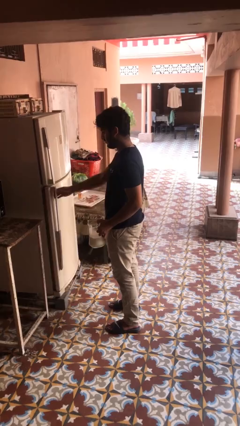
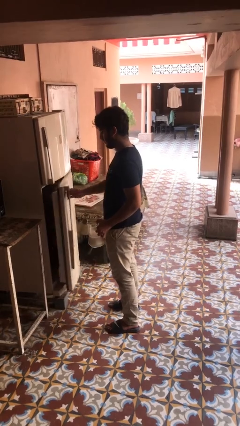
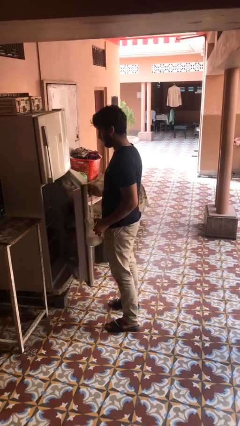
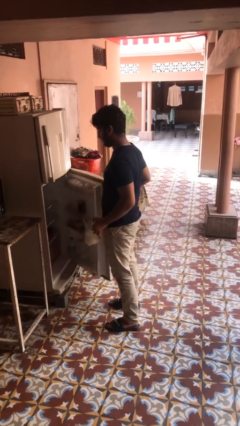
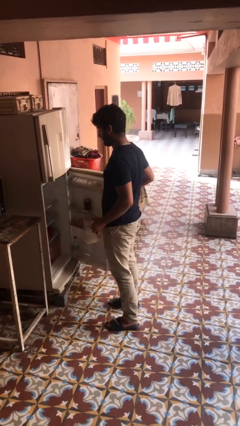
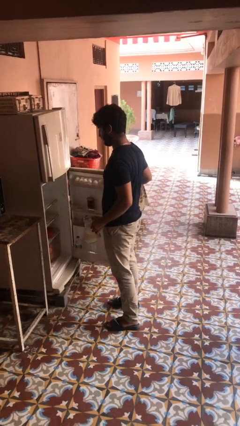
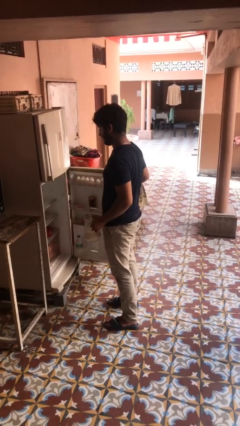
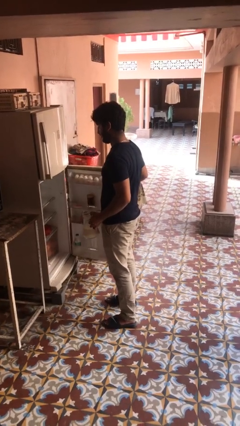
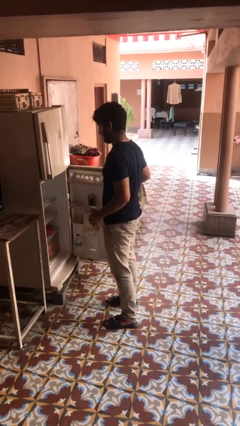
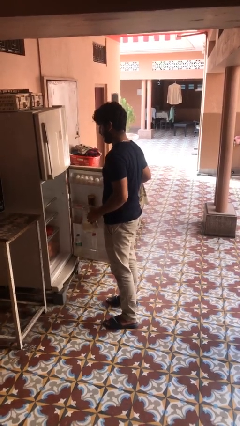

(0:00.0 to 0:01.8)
person opens refrigerator

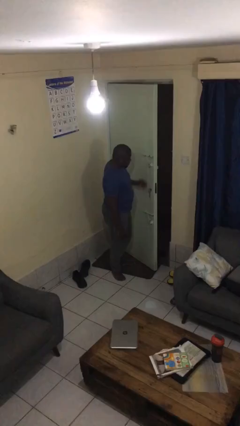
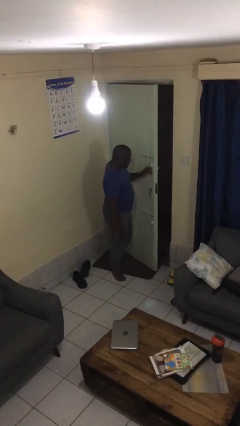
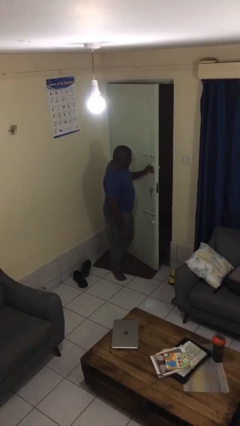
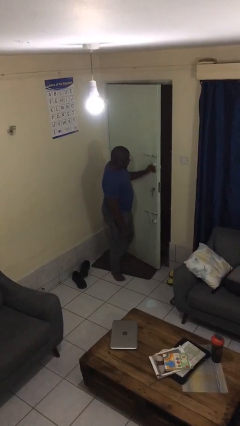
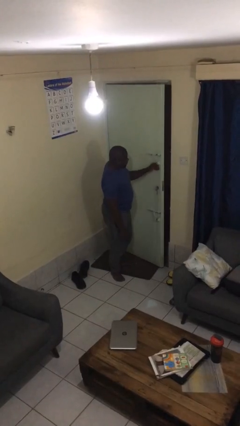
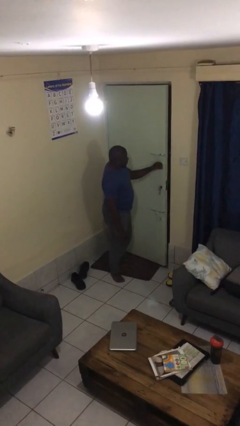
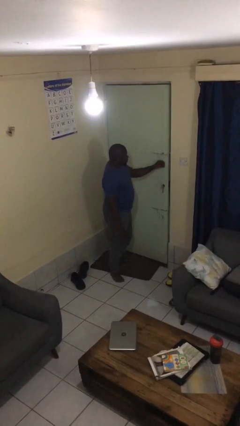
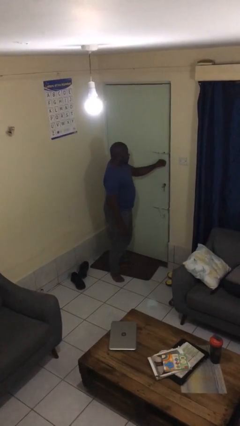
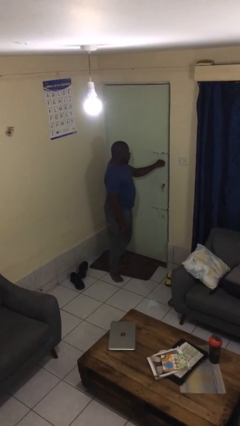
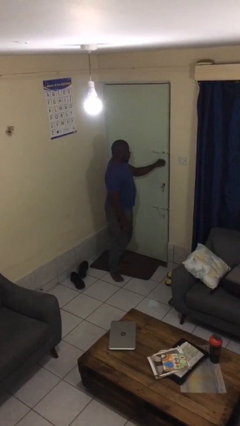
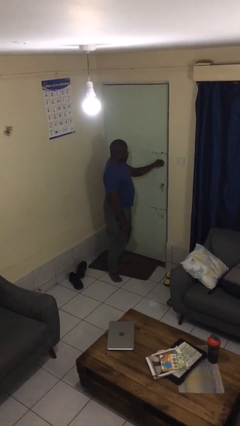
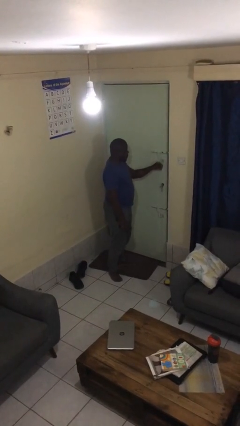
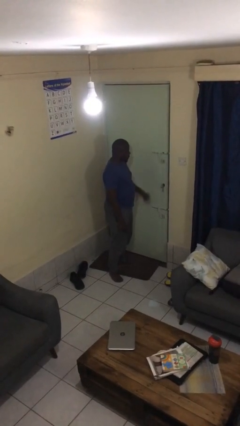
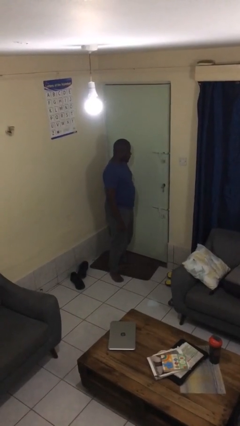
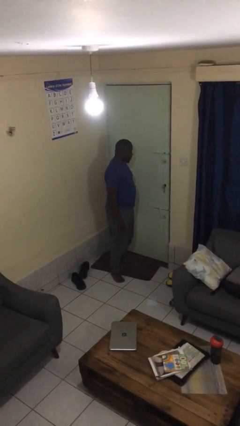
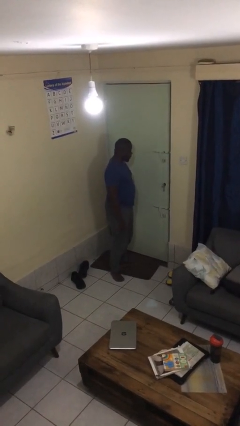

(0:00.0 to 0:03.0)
person closes facility door

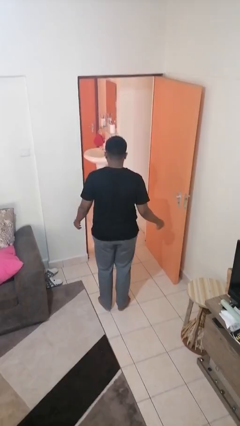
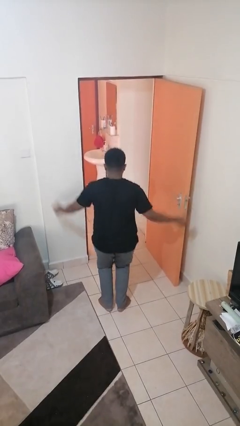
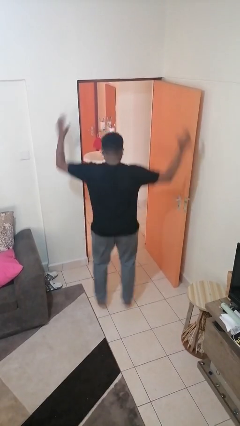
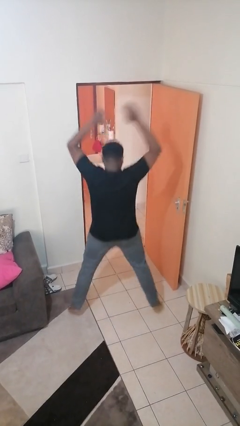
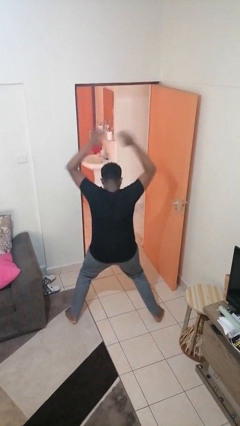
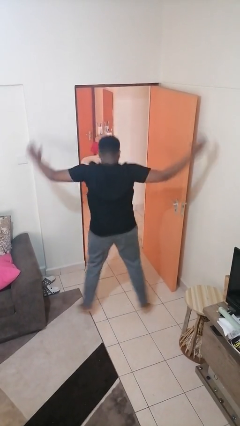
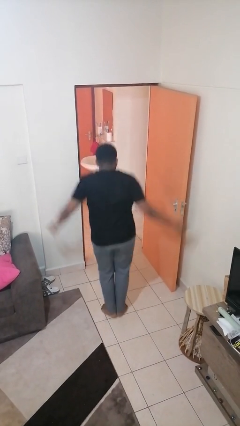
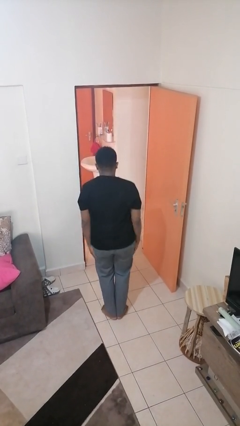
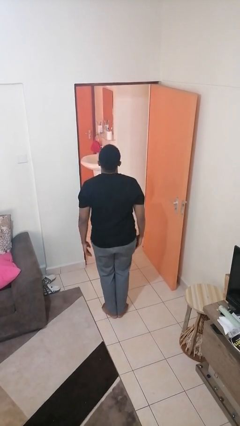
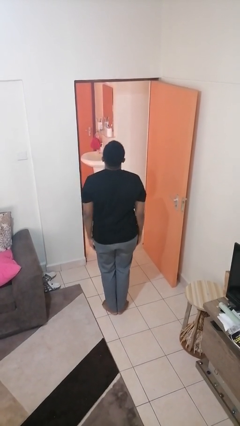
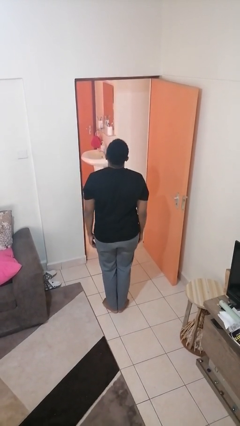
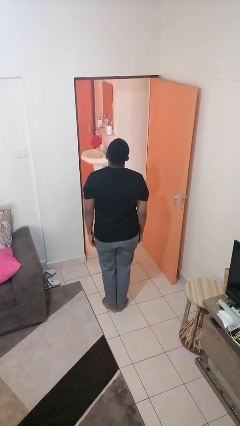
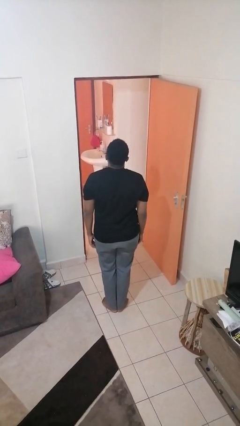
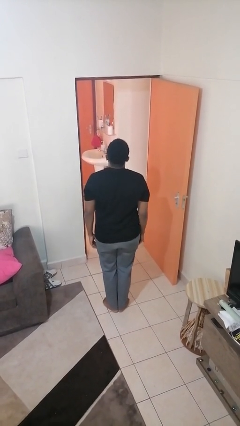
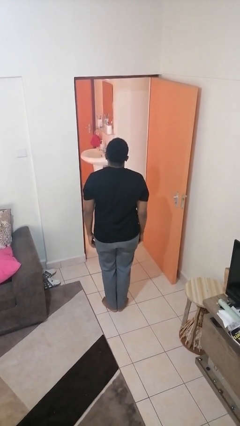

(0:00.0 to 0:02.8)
person exercises with jumping jacks

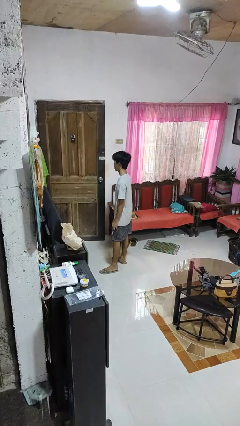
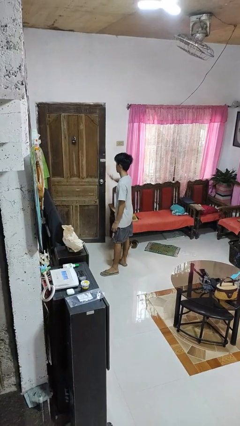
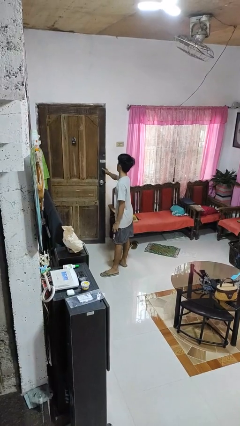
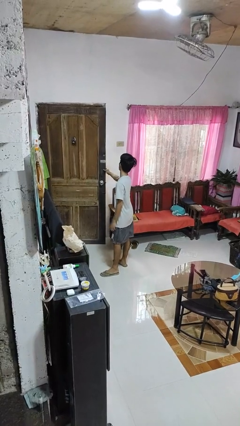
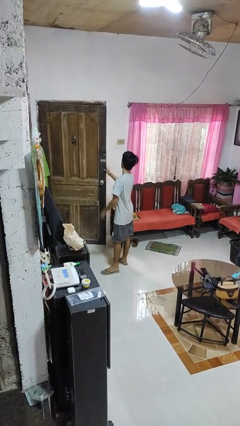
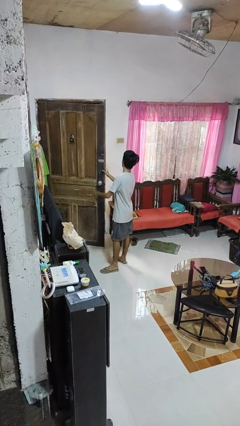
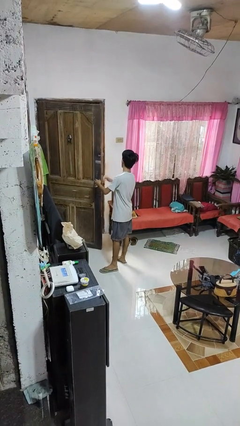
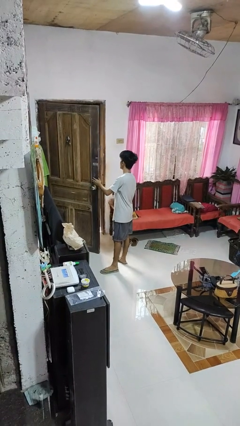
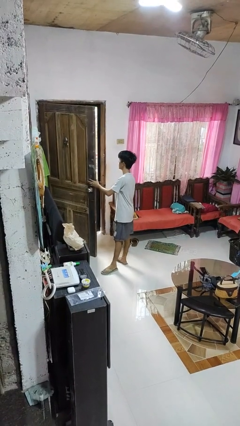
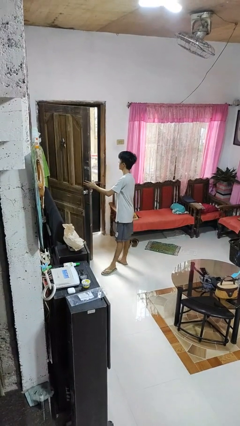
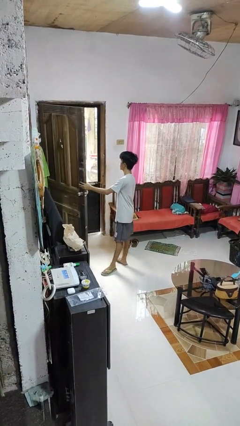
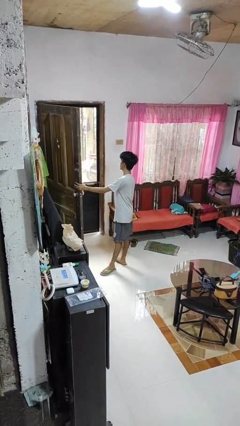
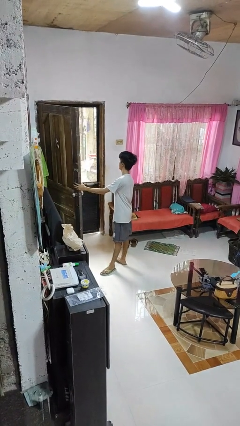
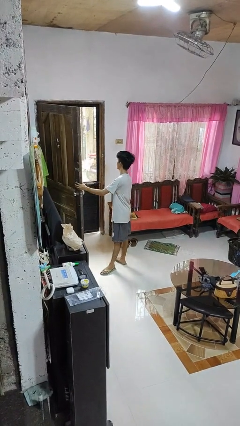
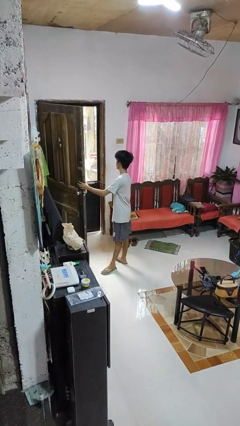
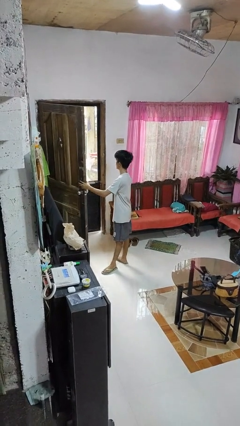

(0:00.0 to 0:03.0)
person opens facility door

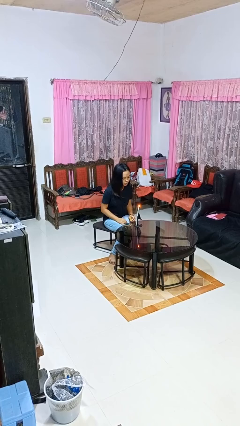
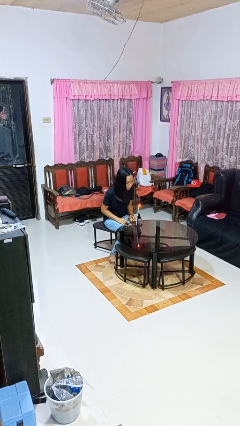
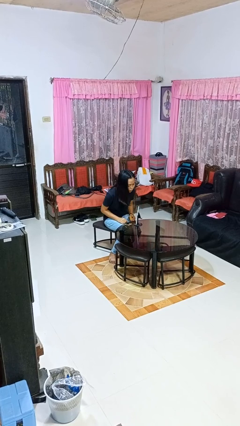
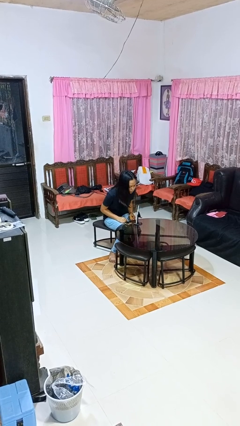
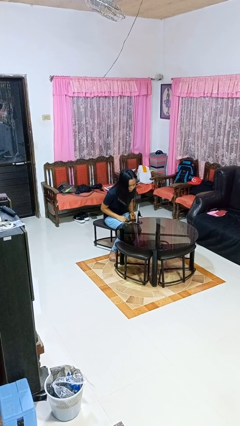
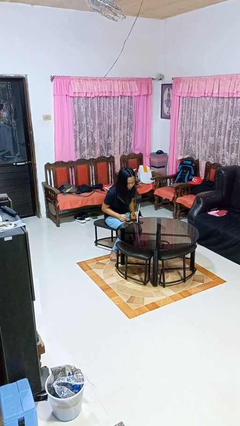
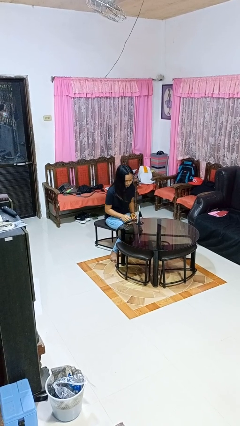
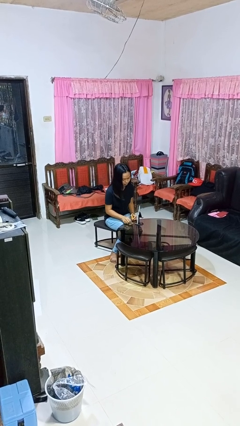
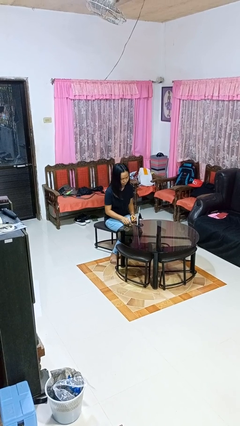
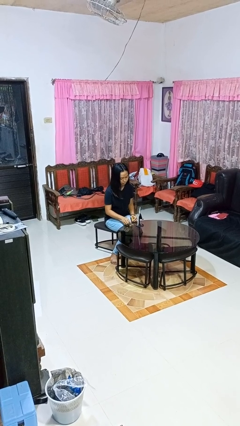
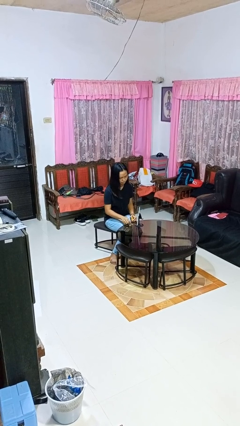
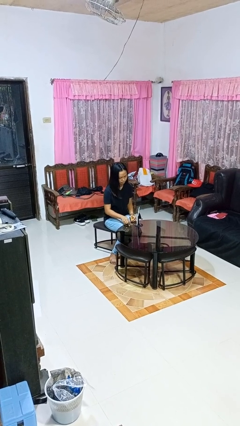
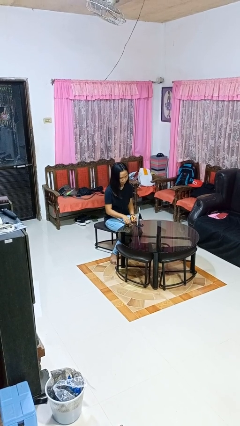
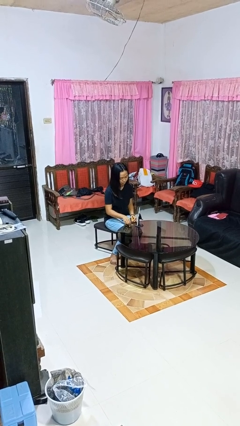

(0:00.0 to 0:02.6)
person extinguishes candle

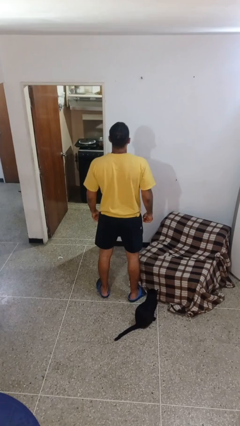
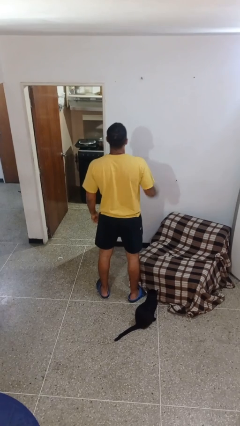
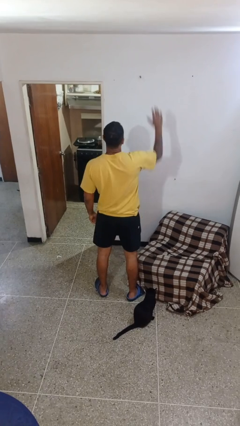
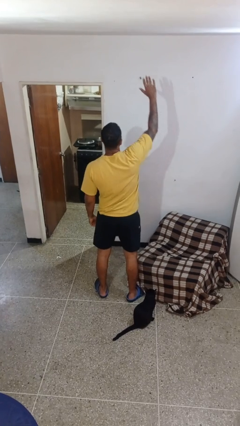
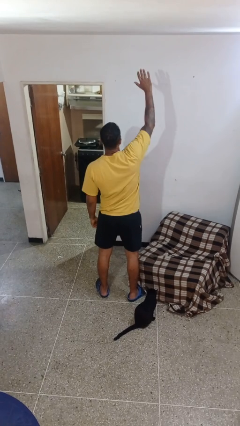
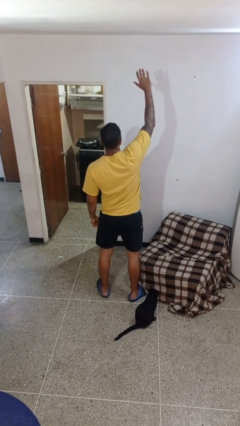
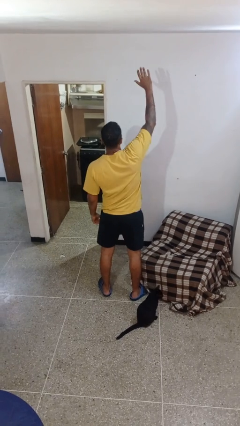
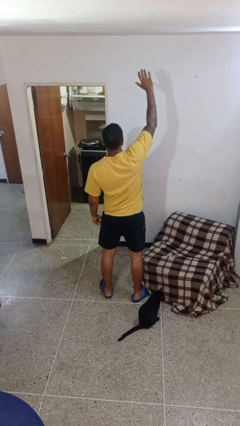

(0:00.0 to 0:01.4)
person gestures raise hand

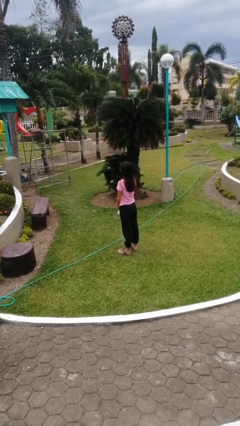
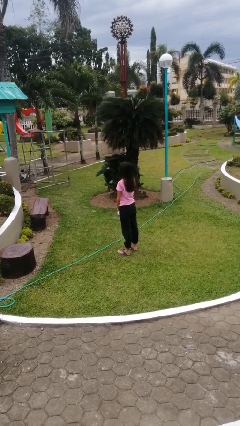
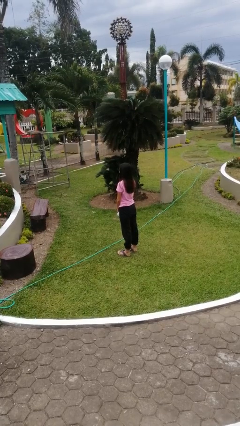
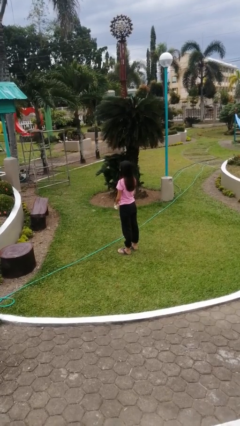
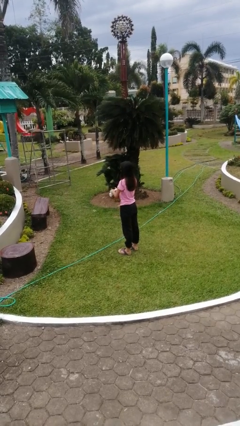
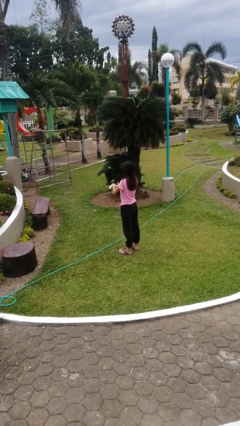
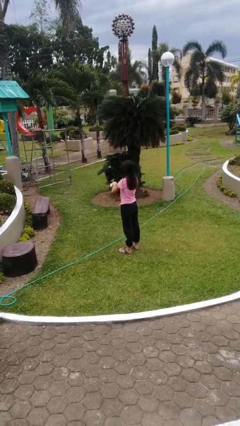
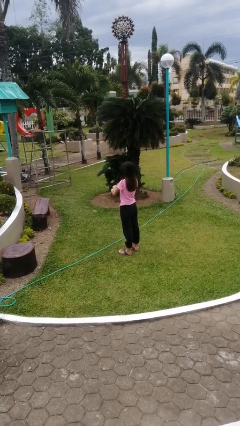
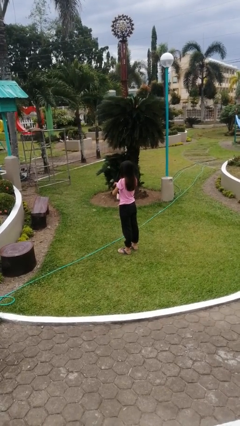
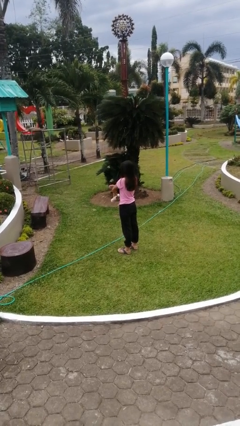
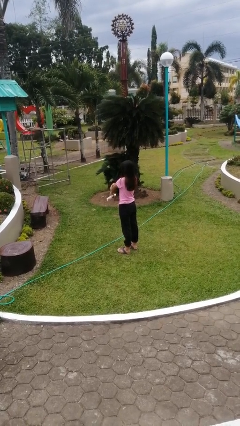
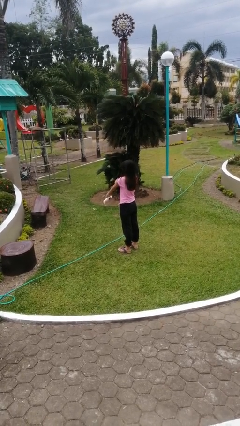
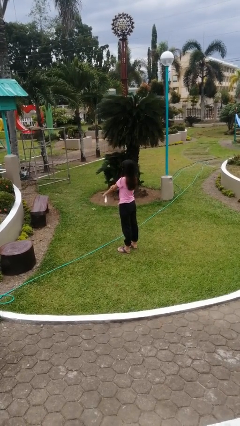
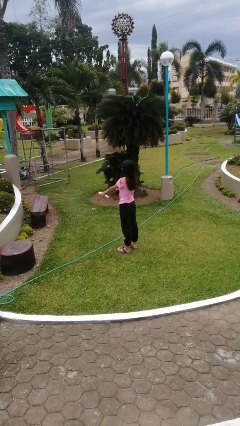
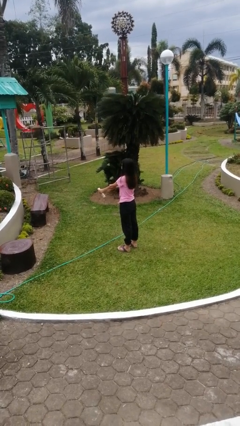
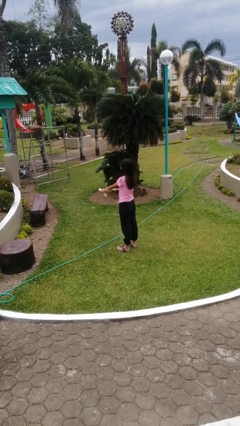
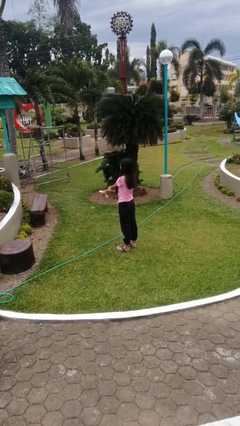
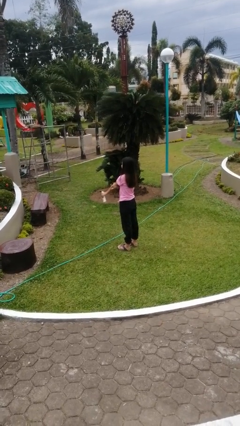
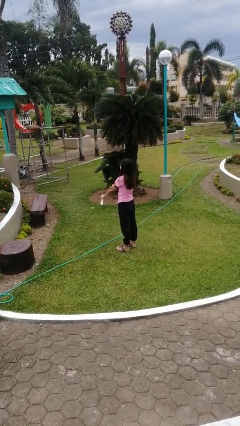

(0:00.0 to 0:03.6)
person applies sunscreen
